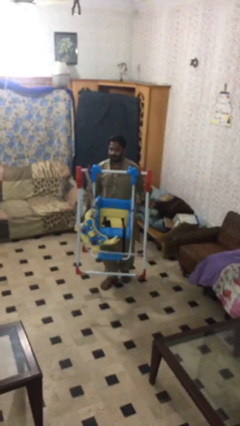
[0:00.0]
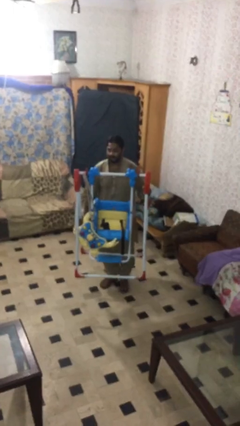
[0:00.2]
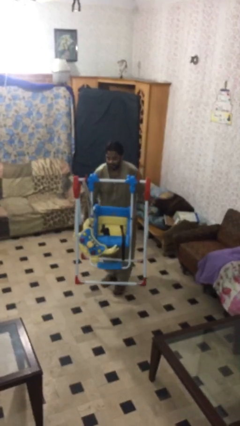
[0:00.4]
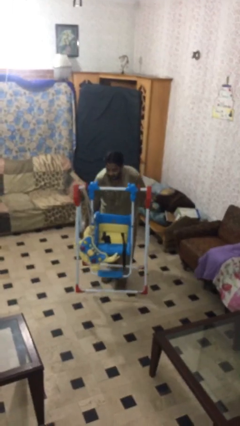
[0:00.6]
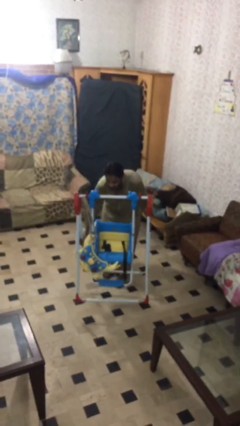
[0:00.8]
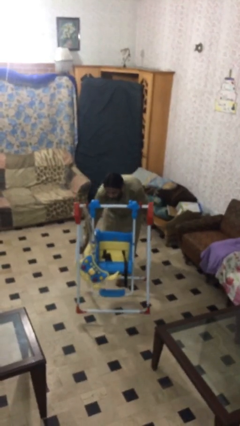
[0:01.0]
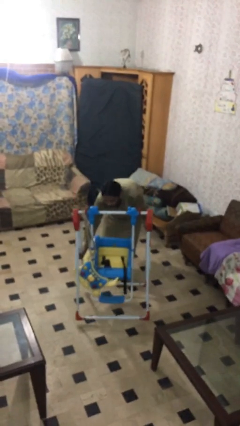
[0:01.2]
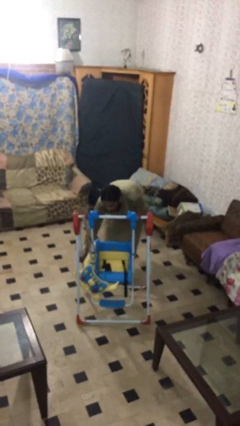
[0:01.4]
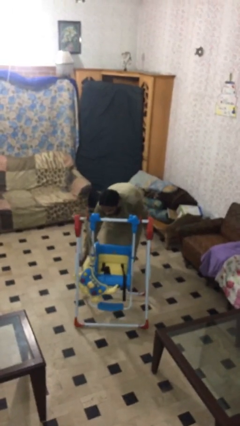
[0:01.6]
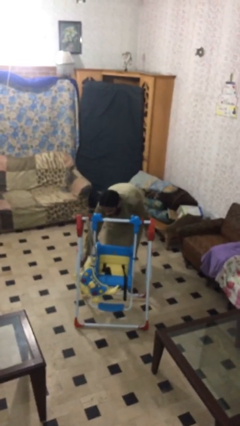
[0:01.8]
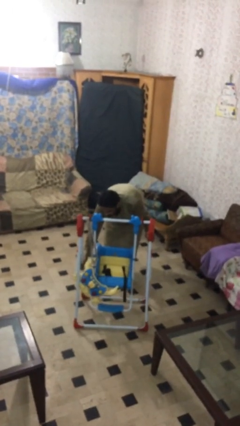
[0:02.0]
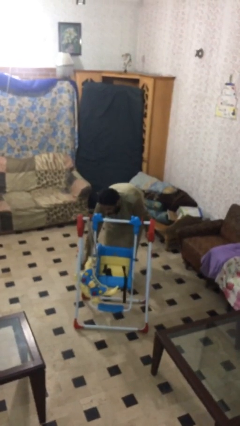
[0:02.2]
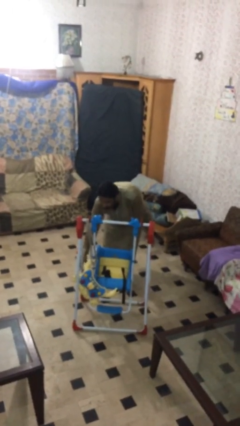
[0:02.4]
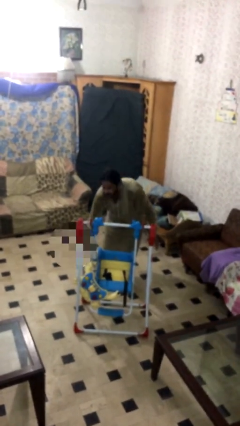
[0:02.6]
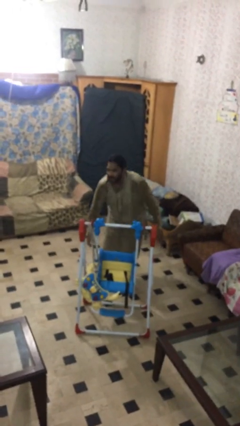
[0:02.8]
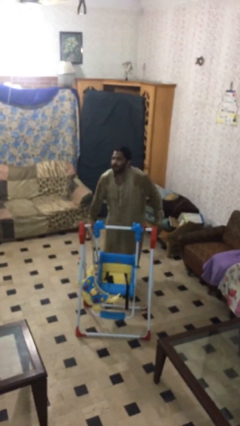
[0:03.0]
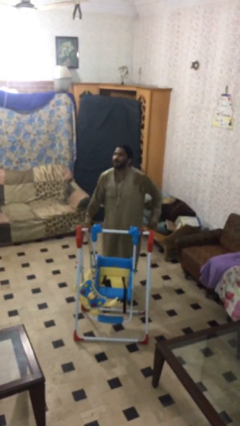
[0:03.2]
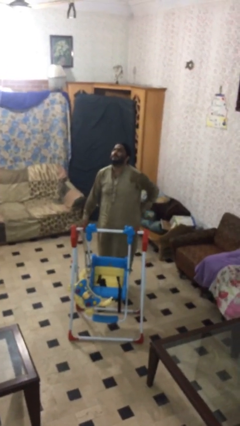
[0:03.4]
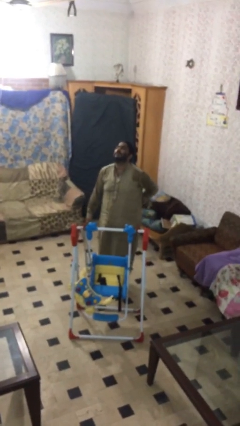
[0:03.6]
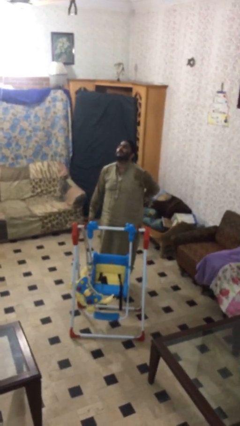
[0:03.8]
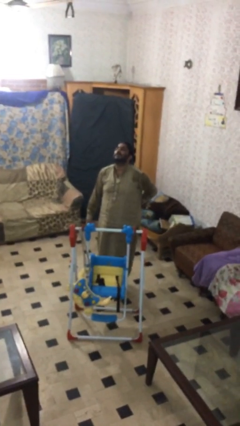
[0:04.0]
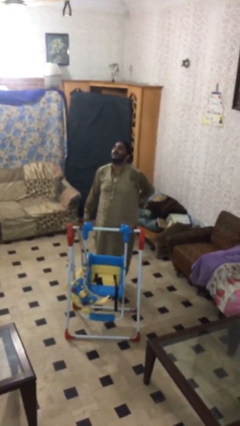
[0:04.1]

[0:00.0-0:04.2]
person puts down object on floor

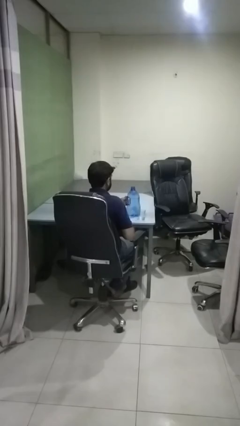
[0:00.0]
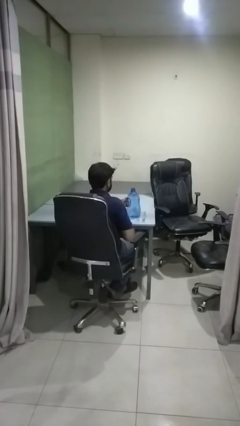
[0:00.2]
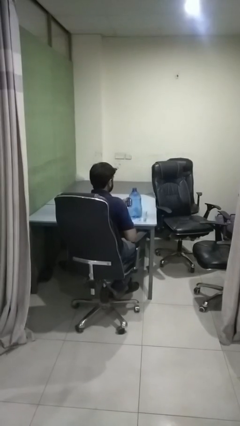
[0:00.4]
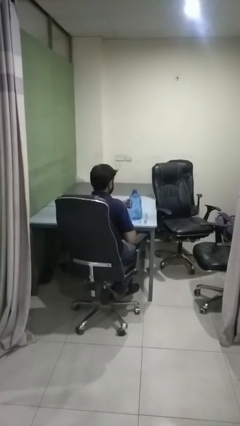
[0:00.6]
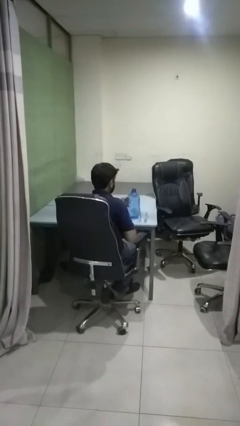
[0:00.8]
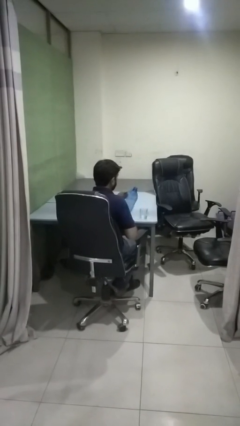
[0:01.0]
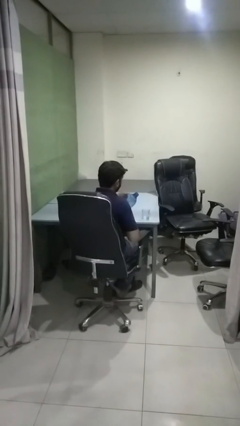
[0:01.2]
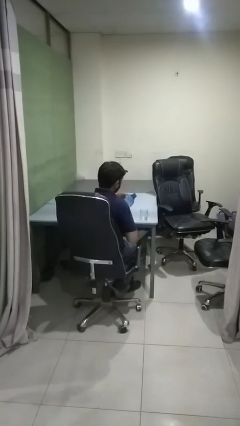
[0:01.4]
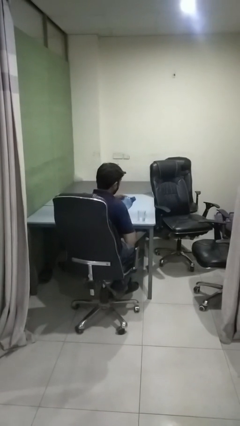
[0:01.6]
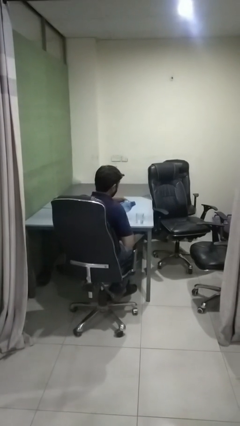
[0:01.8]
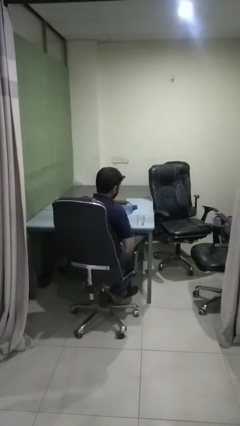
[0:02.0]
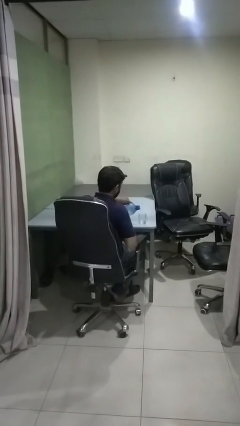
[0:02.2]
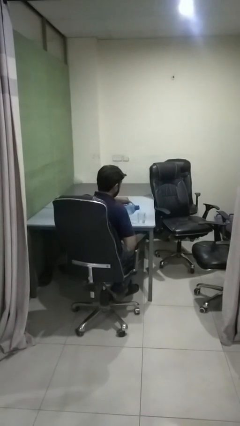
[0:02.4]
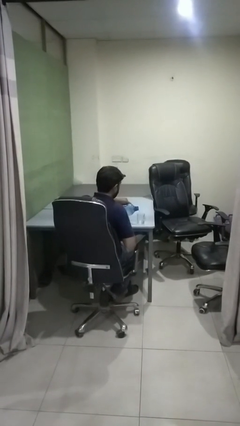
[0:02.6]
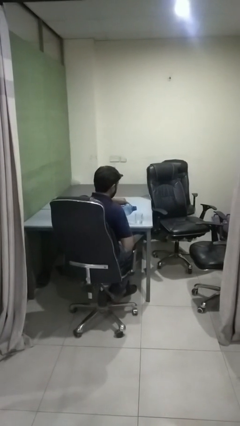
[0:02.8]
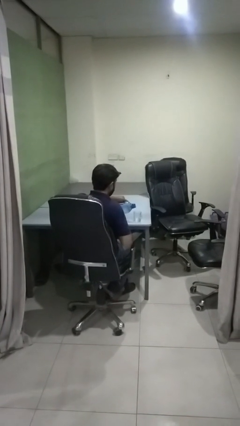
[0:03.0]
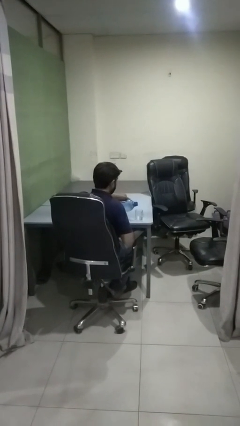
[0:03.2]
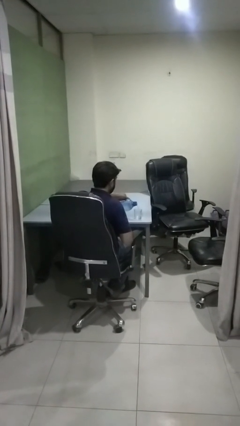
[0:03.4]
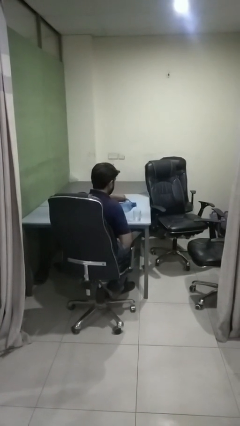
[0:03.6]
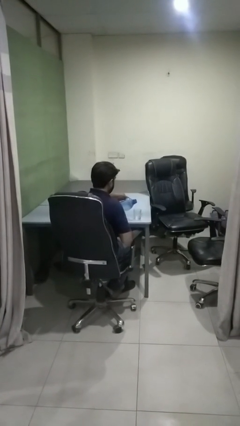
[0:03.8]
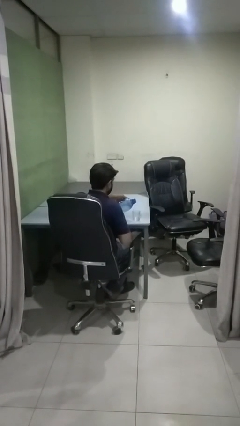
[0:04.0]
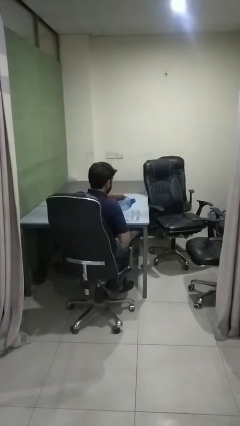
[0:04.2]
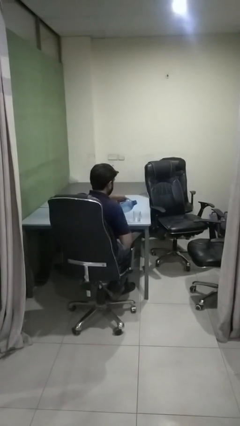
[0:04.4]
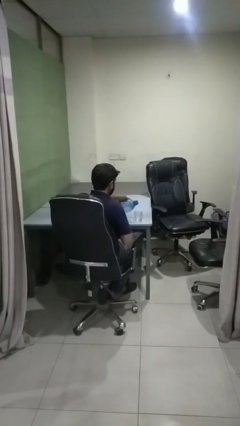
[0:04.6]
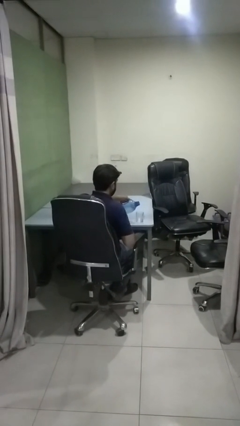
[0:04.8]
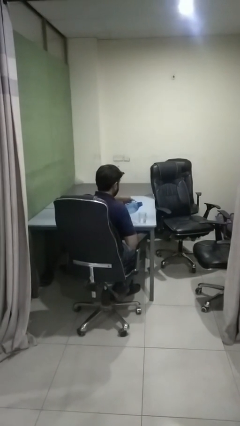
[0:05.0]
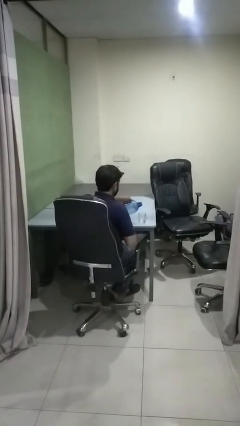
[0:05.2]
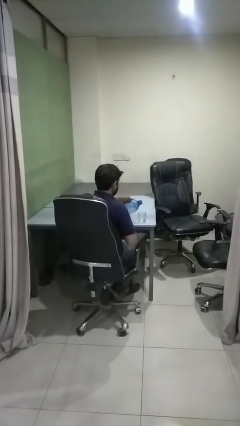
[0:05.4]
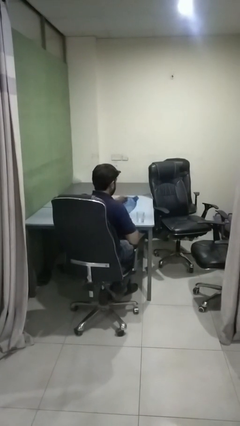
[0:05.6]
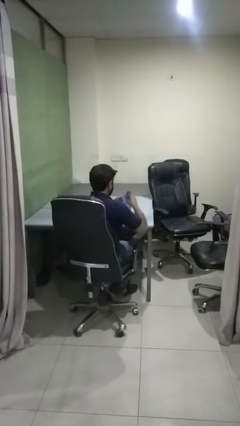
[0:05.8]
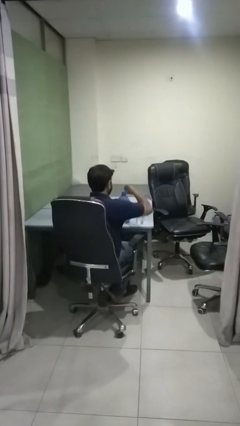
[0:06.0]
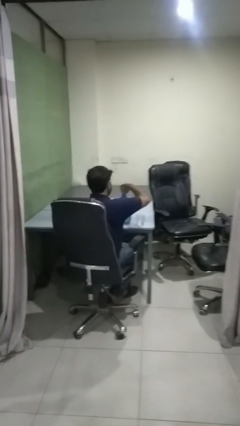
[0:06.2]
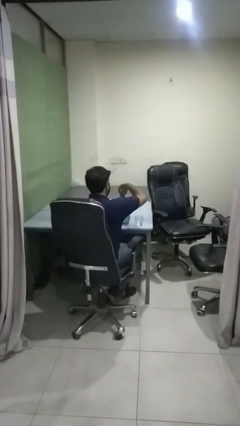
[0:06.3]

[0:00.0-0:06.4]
person pours liquid into cup

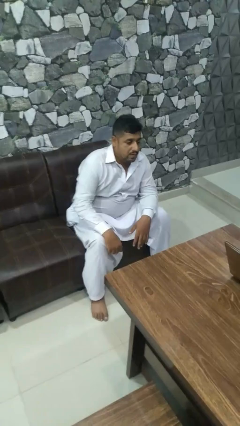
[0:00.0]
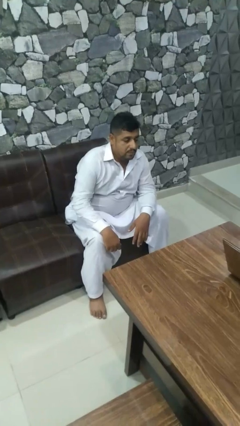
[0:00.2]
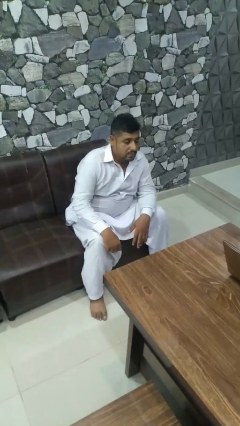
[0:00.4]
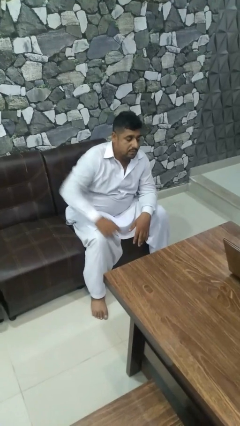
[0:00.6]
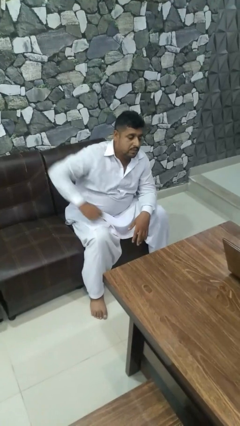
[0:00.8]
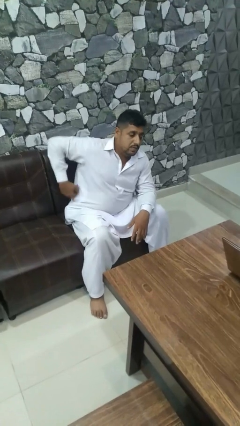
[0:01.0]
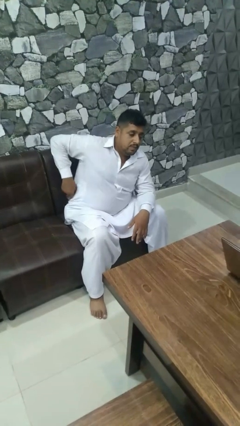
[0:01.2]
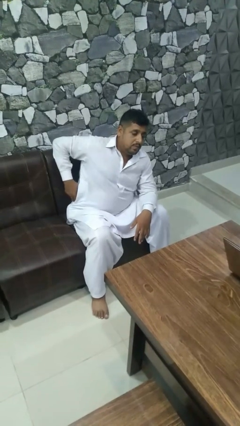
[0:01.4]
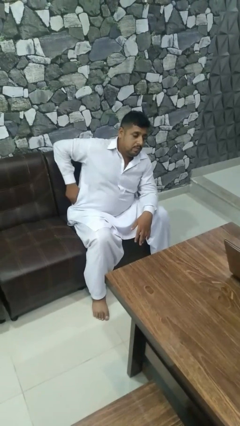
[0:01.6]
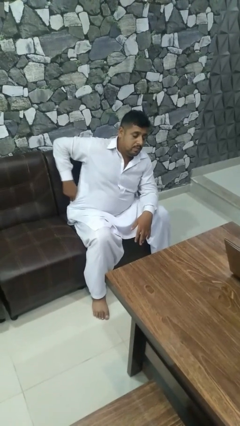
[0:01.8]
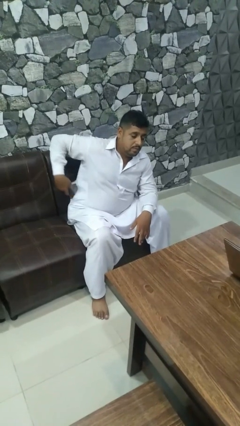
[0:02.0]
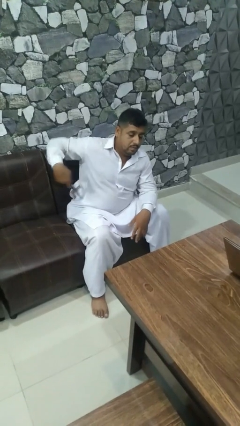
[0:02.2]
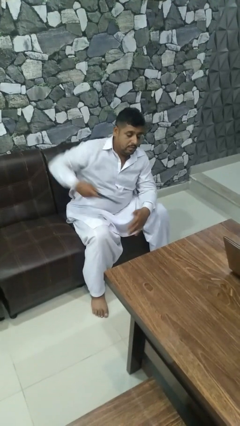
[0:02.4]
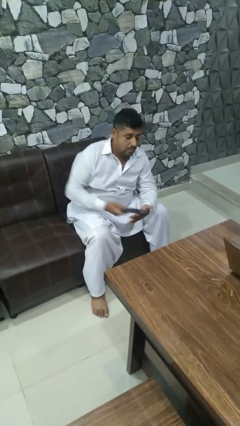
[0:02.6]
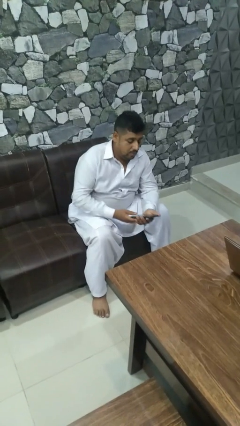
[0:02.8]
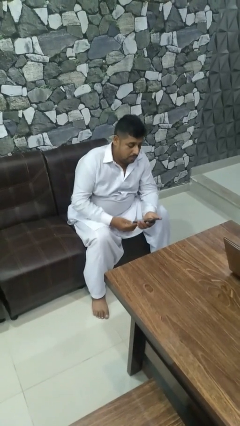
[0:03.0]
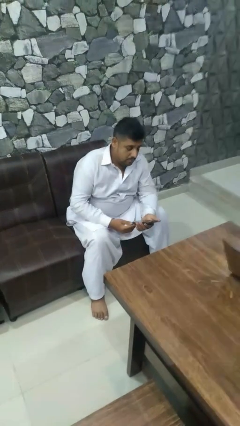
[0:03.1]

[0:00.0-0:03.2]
person takes phone from pocket

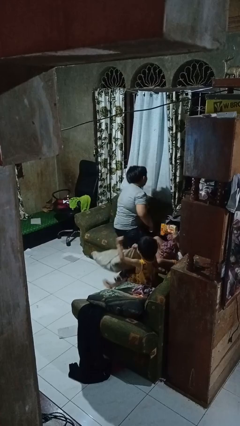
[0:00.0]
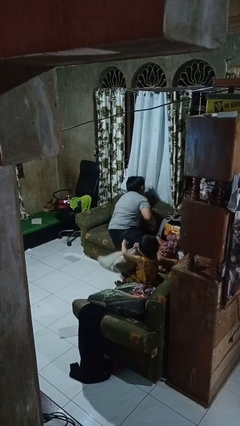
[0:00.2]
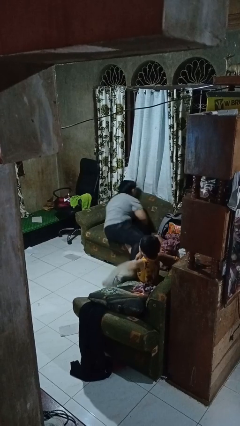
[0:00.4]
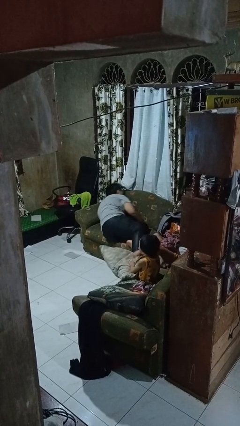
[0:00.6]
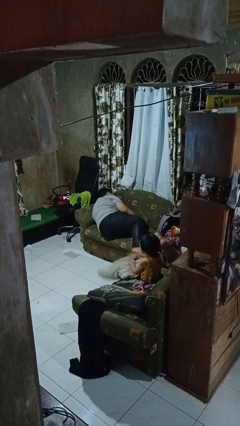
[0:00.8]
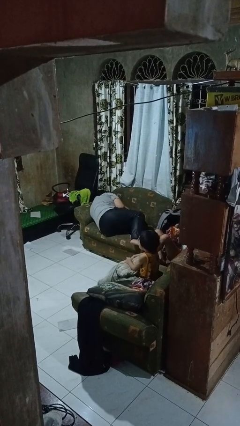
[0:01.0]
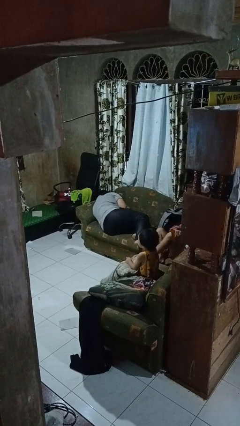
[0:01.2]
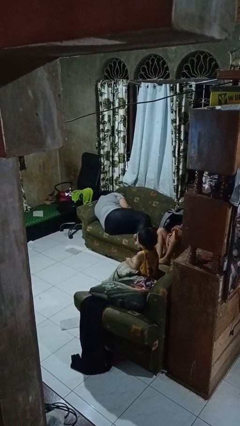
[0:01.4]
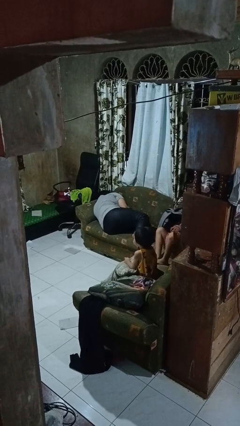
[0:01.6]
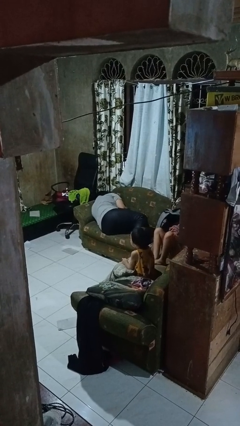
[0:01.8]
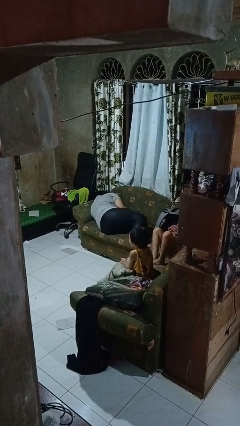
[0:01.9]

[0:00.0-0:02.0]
person lies down on couch

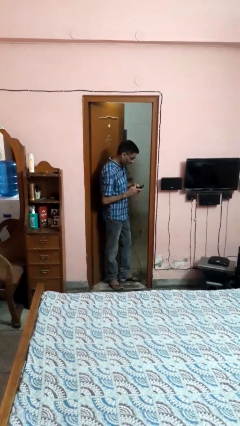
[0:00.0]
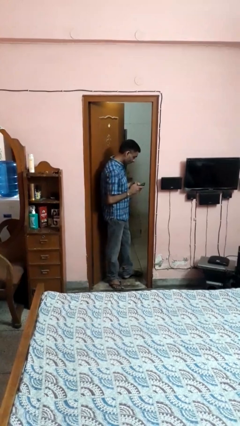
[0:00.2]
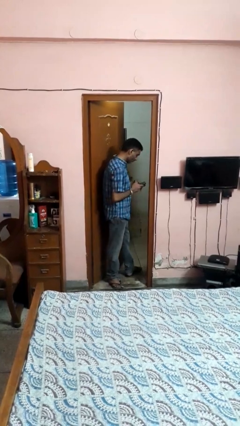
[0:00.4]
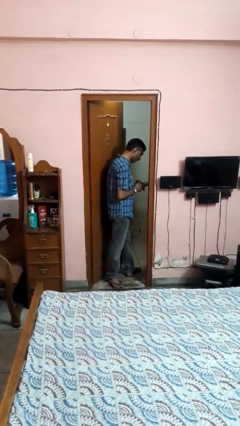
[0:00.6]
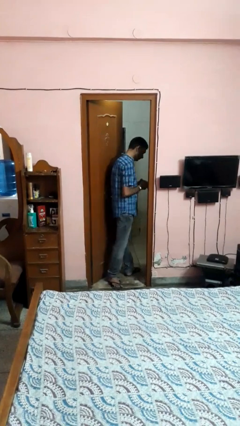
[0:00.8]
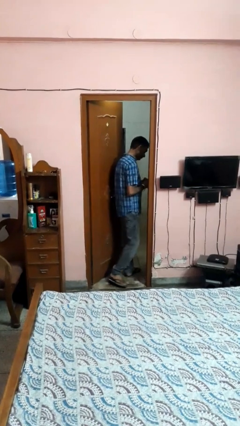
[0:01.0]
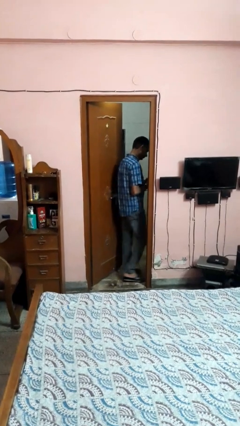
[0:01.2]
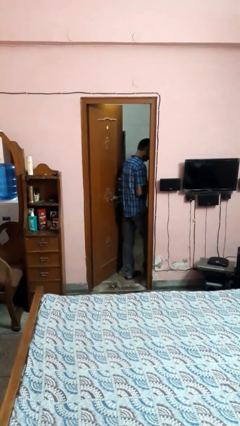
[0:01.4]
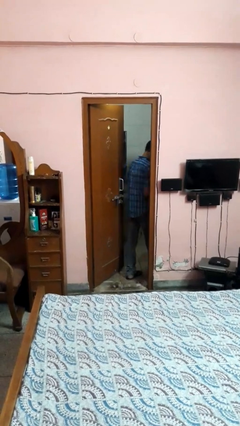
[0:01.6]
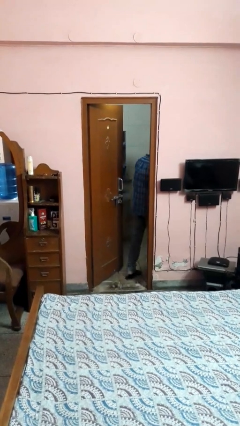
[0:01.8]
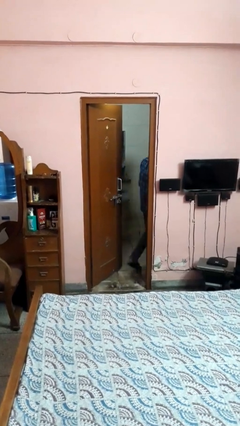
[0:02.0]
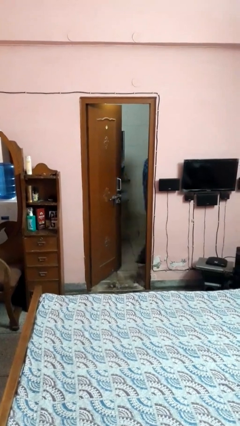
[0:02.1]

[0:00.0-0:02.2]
person exits scene through structure
